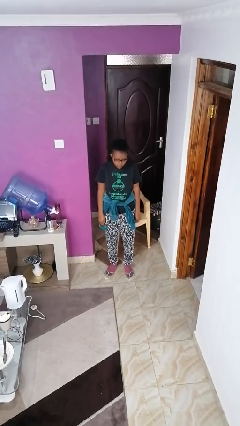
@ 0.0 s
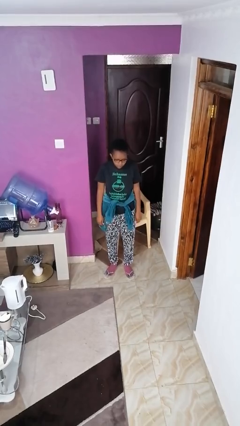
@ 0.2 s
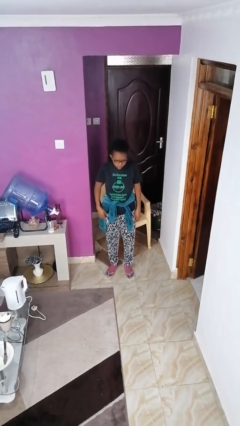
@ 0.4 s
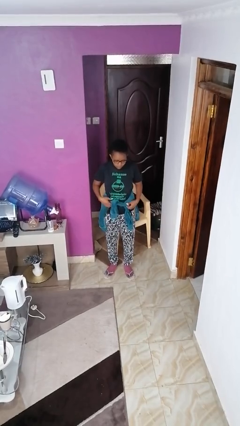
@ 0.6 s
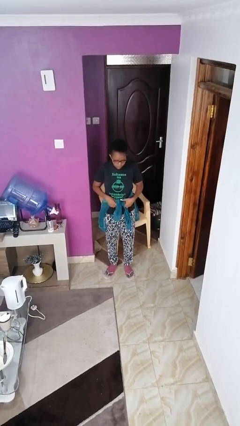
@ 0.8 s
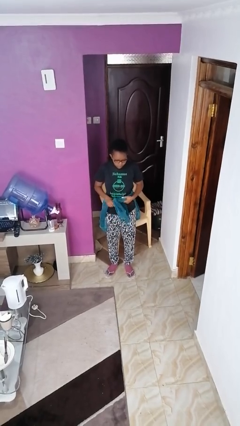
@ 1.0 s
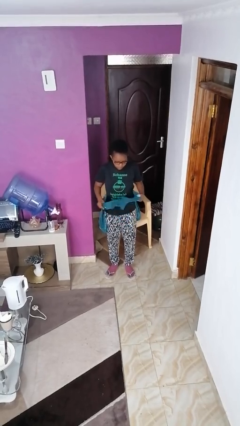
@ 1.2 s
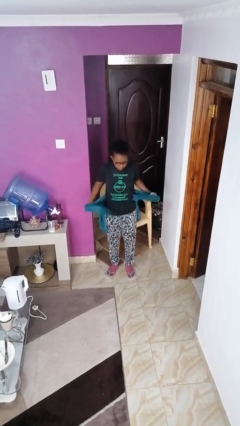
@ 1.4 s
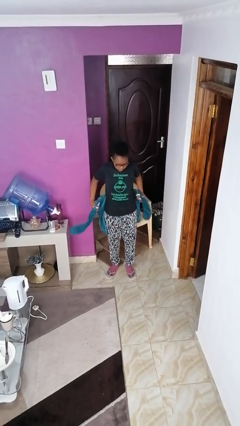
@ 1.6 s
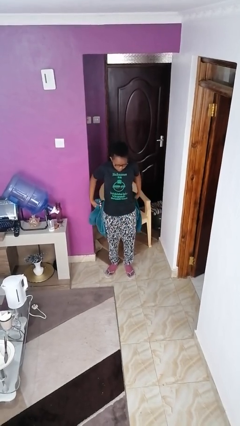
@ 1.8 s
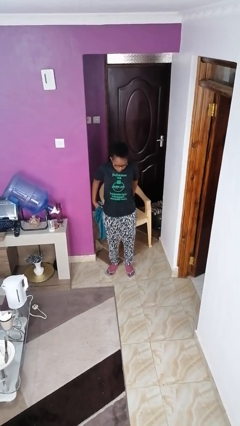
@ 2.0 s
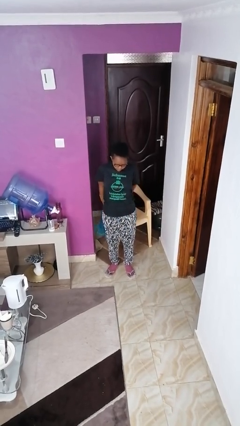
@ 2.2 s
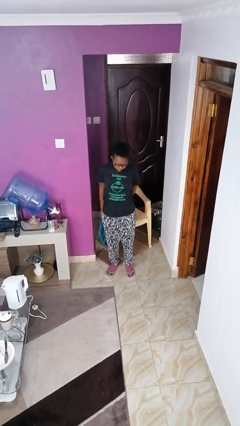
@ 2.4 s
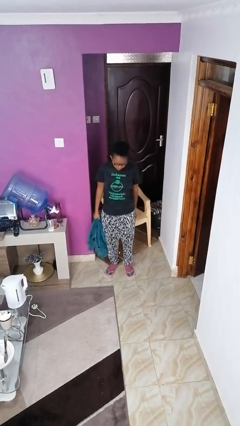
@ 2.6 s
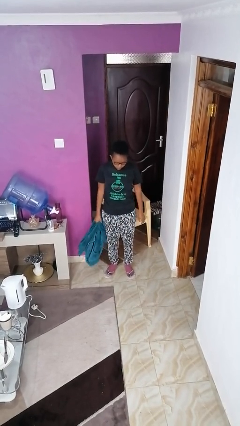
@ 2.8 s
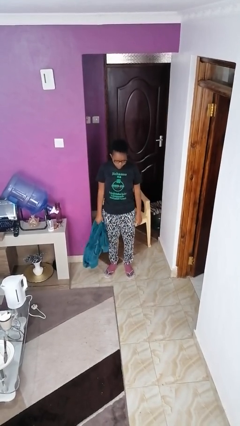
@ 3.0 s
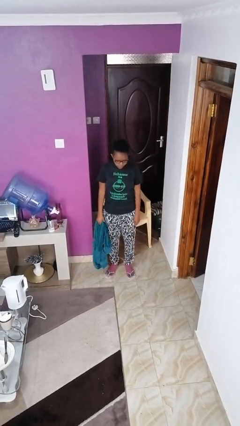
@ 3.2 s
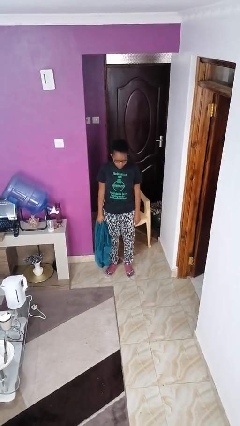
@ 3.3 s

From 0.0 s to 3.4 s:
person unties jacket around waist

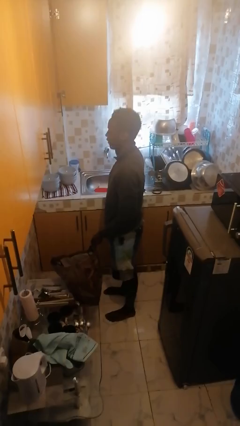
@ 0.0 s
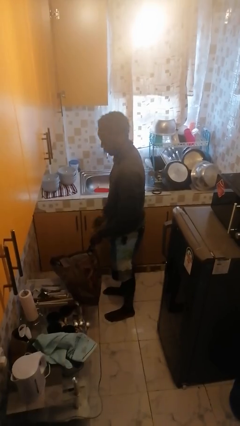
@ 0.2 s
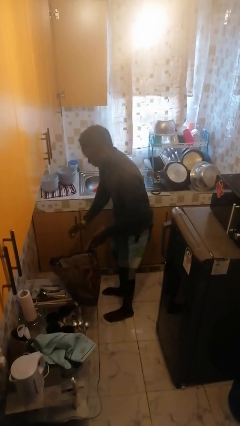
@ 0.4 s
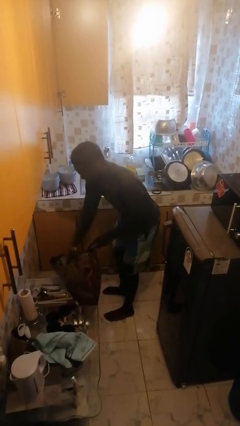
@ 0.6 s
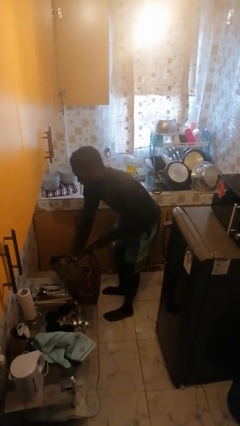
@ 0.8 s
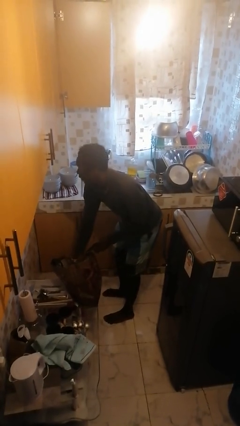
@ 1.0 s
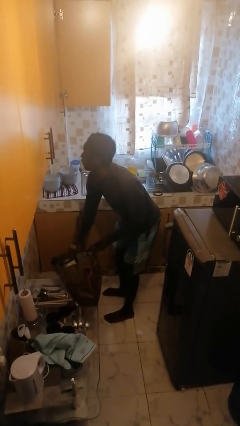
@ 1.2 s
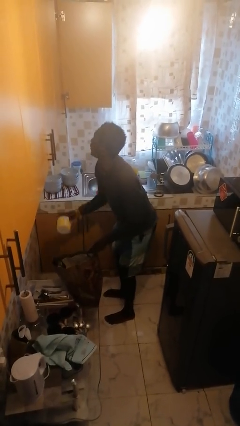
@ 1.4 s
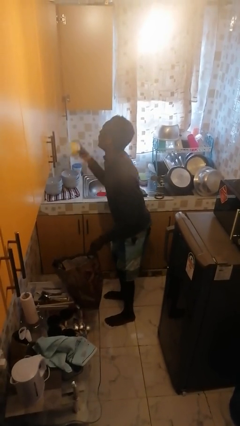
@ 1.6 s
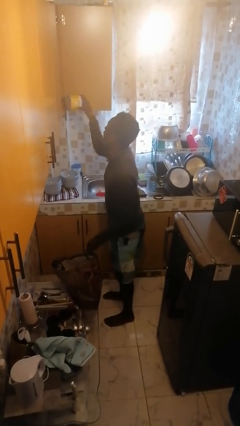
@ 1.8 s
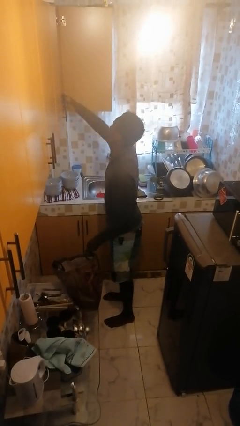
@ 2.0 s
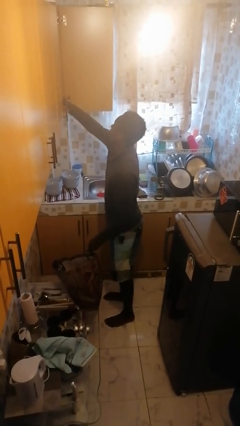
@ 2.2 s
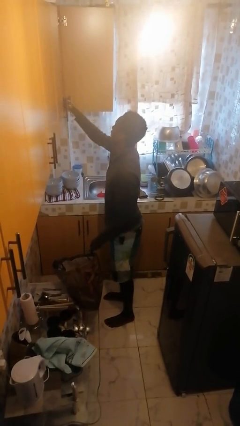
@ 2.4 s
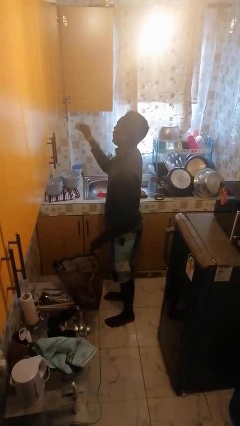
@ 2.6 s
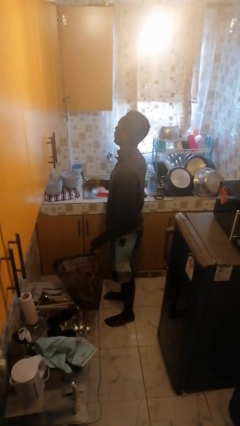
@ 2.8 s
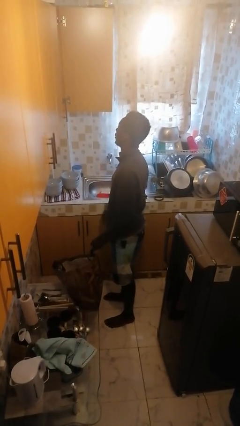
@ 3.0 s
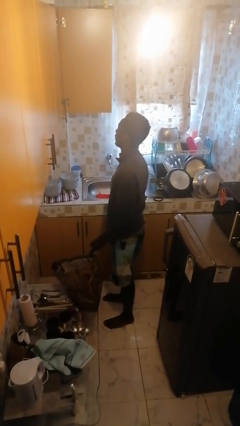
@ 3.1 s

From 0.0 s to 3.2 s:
person loads groceries into cabinet

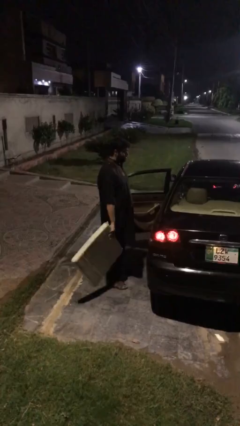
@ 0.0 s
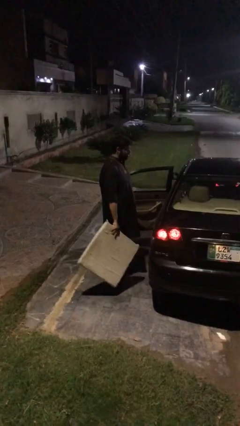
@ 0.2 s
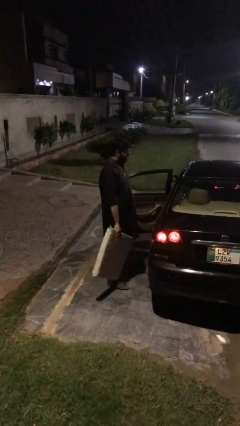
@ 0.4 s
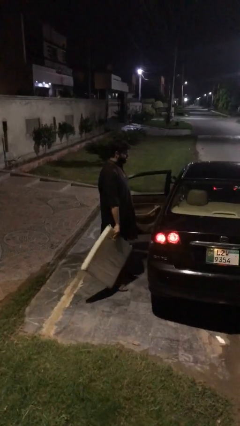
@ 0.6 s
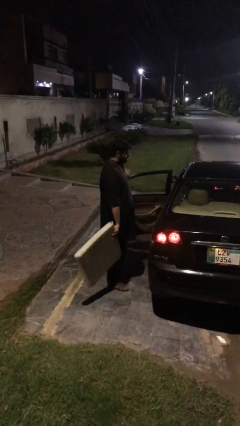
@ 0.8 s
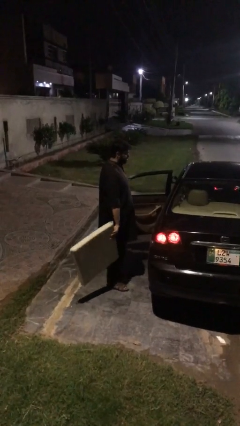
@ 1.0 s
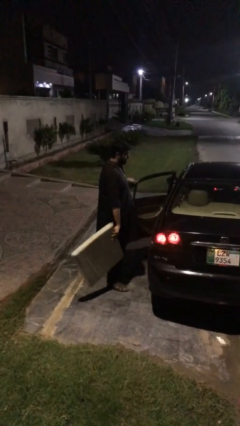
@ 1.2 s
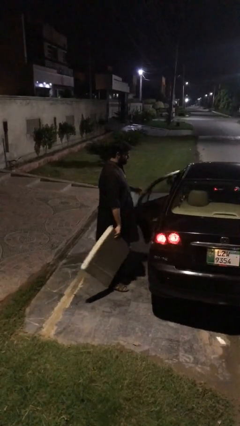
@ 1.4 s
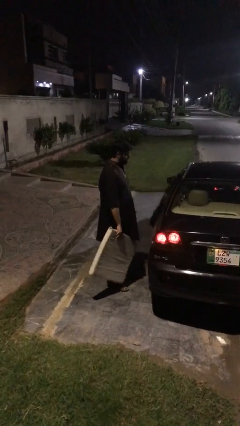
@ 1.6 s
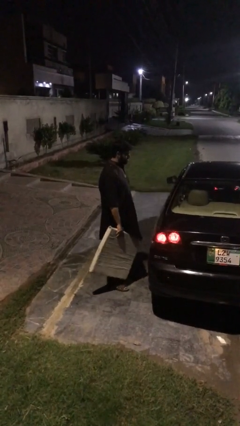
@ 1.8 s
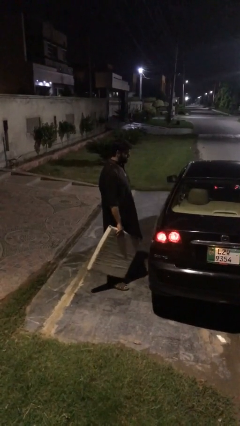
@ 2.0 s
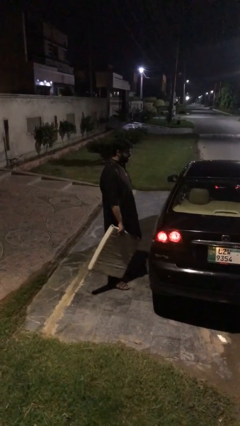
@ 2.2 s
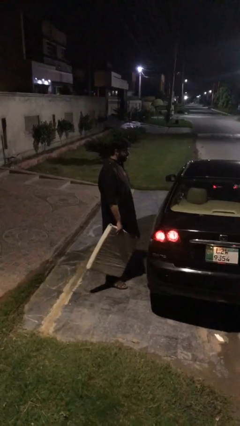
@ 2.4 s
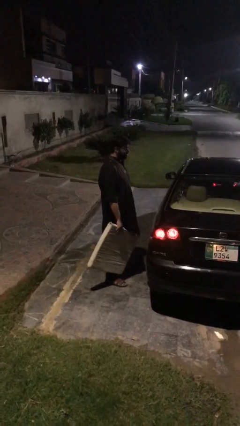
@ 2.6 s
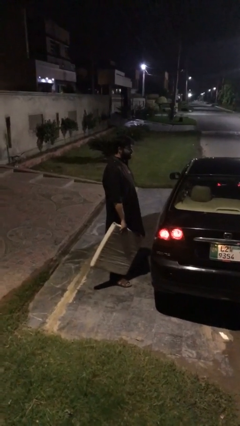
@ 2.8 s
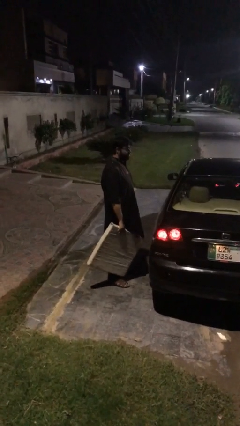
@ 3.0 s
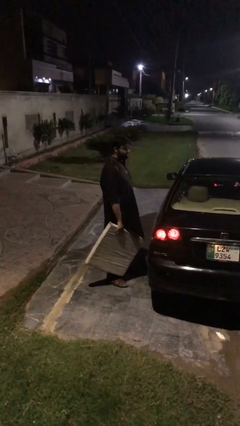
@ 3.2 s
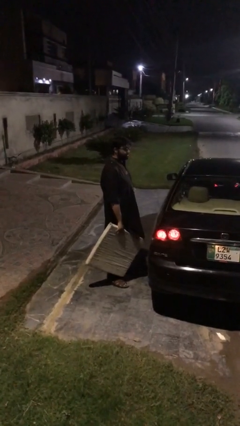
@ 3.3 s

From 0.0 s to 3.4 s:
person closes car door

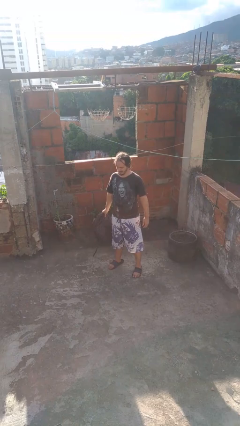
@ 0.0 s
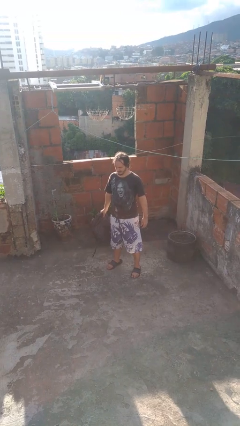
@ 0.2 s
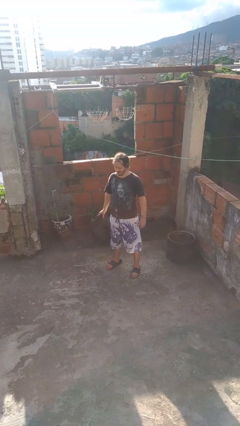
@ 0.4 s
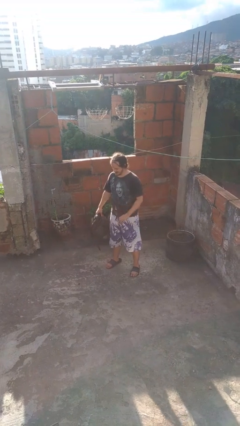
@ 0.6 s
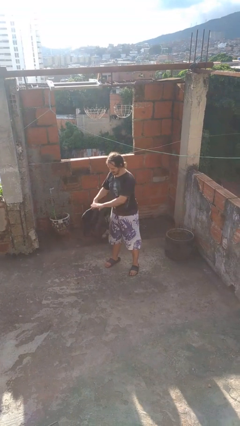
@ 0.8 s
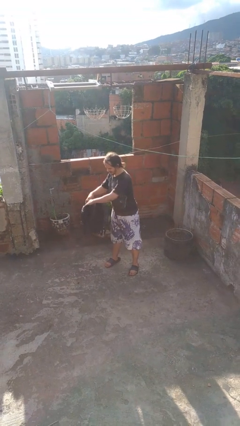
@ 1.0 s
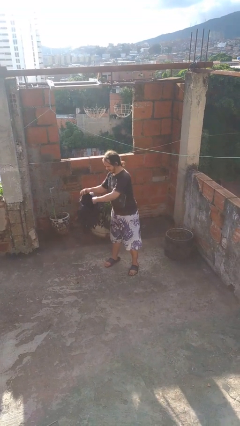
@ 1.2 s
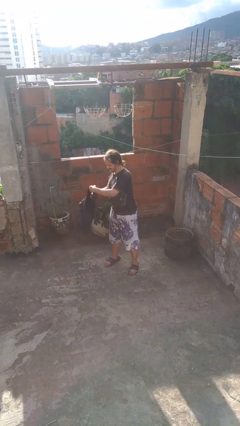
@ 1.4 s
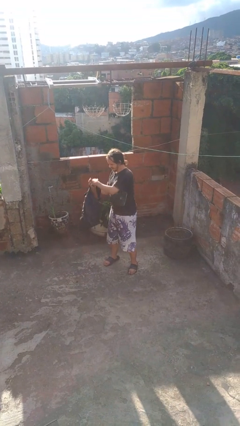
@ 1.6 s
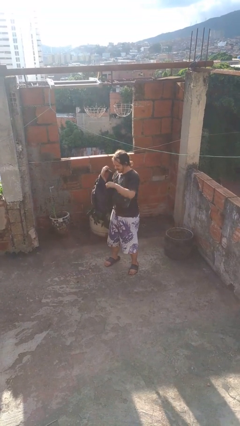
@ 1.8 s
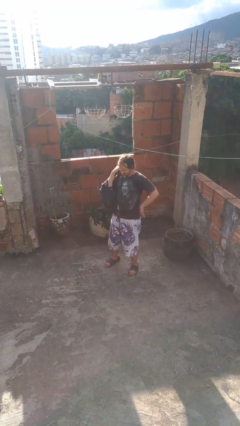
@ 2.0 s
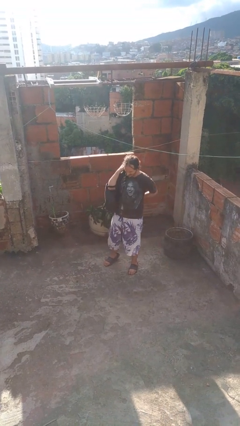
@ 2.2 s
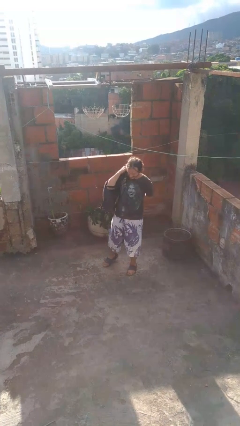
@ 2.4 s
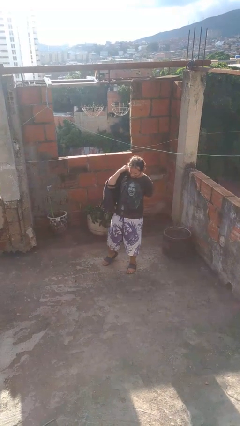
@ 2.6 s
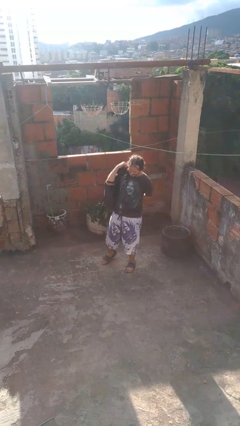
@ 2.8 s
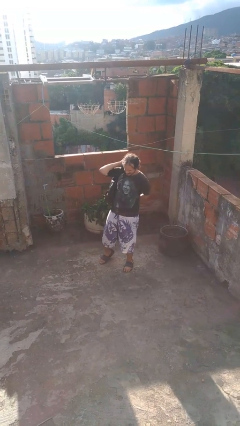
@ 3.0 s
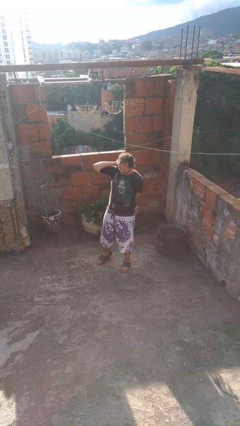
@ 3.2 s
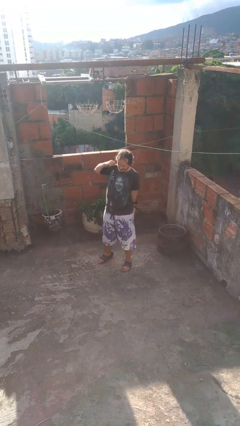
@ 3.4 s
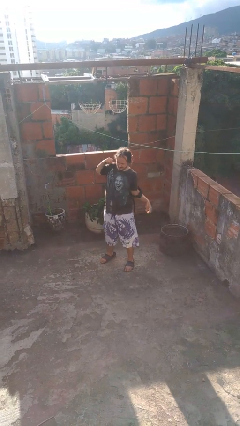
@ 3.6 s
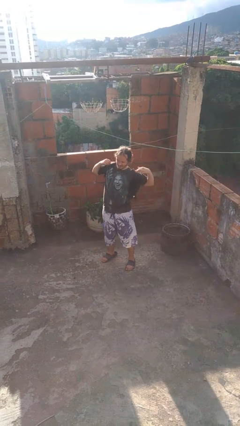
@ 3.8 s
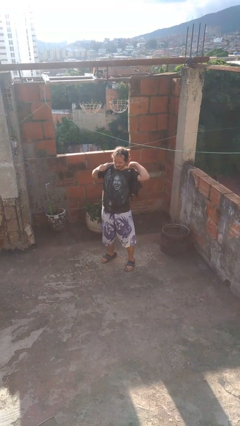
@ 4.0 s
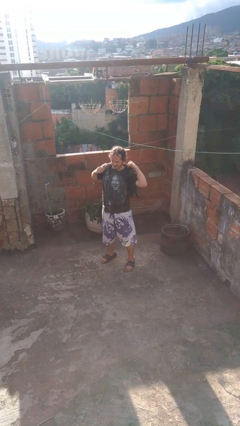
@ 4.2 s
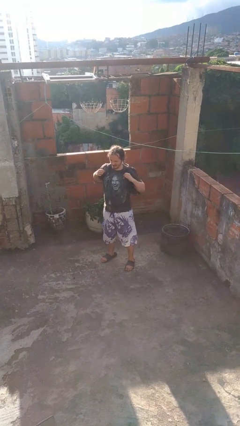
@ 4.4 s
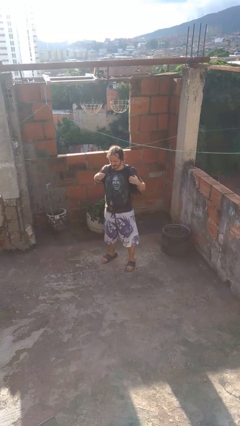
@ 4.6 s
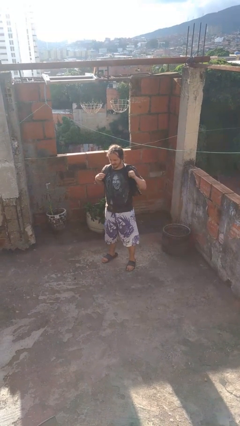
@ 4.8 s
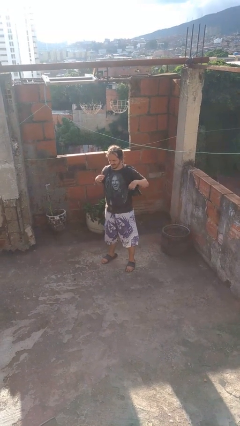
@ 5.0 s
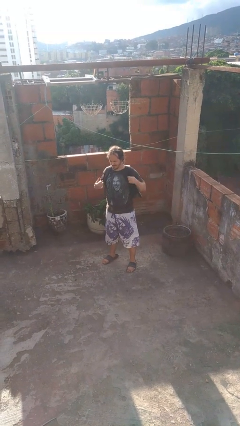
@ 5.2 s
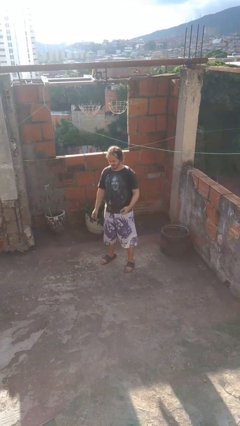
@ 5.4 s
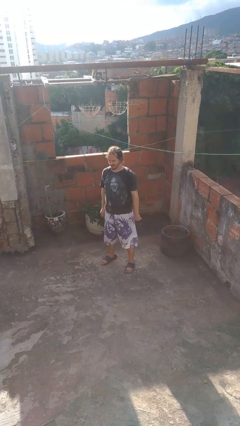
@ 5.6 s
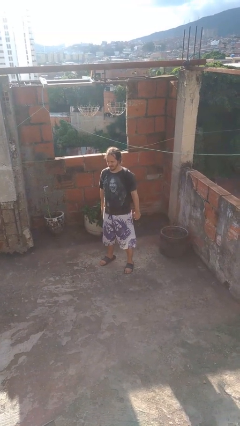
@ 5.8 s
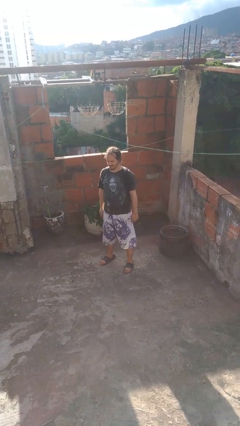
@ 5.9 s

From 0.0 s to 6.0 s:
person puts on backpack

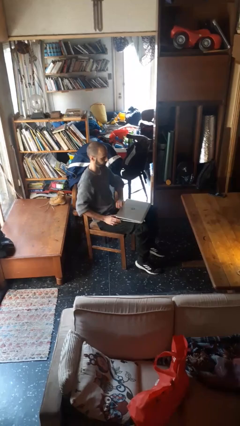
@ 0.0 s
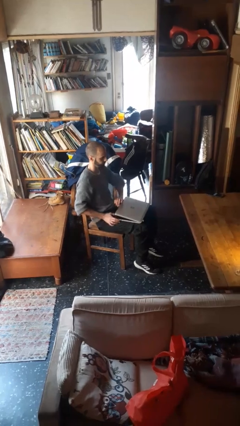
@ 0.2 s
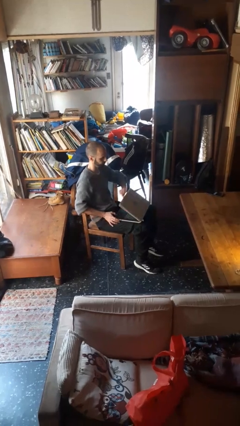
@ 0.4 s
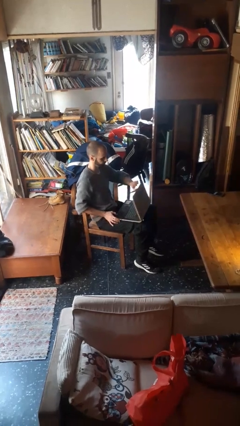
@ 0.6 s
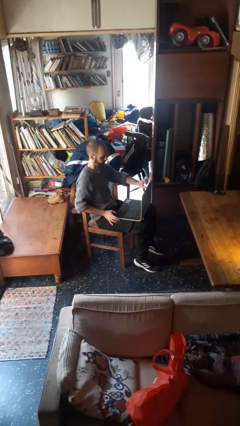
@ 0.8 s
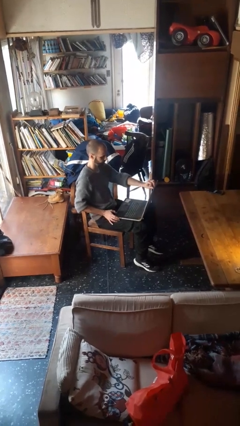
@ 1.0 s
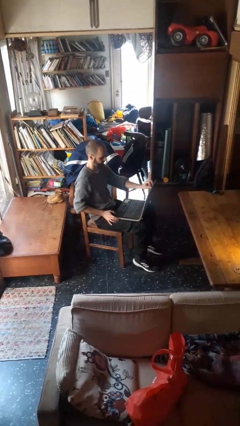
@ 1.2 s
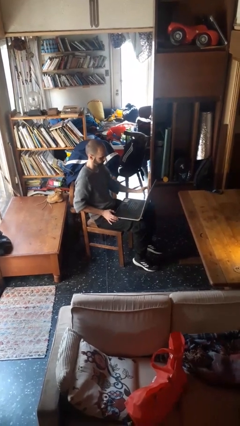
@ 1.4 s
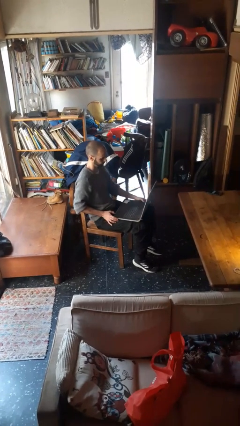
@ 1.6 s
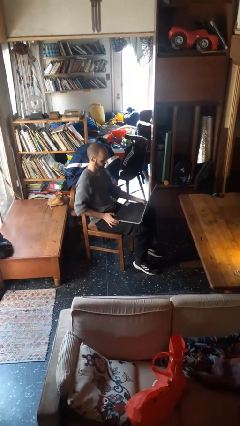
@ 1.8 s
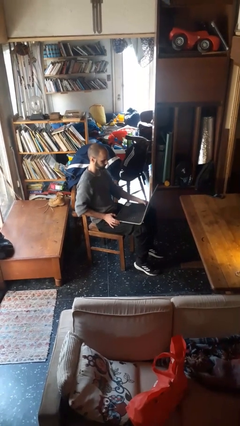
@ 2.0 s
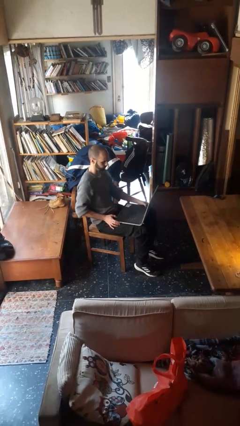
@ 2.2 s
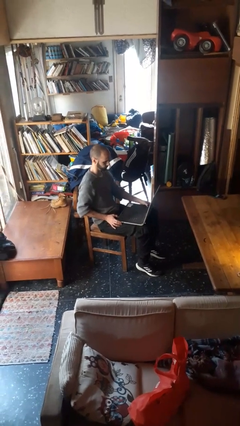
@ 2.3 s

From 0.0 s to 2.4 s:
person opens laptop
